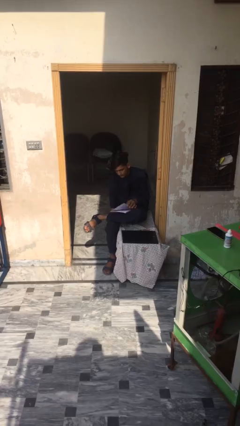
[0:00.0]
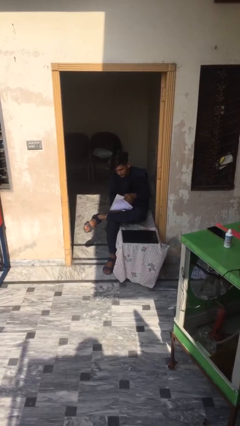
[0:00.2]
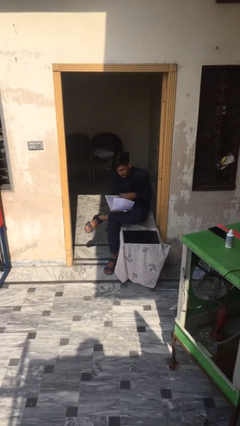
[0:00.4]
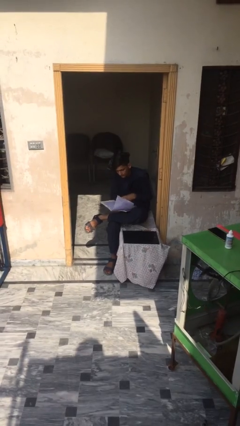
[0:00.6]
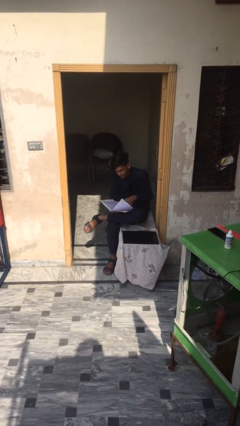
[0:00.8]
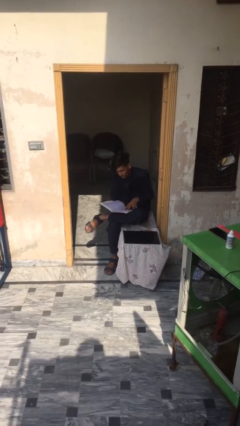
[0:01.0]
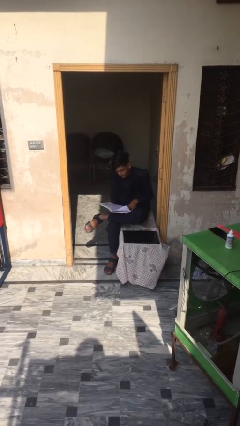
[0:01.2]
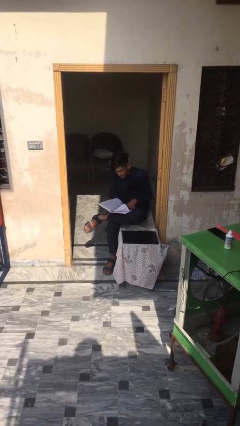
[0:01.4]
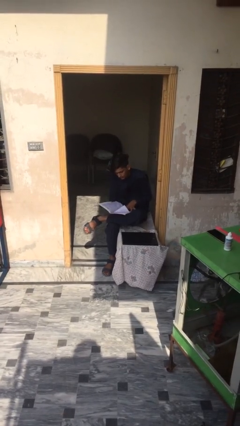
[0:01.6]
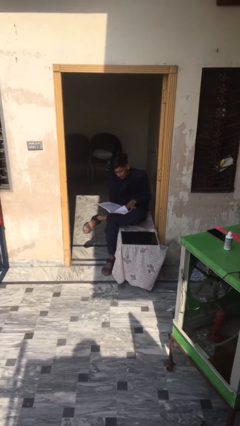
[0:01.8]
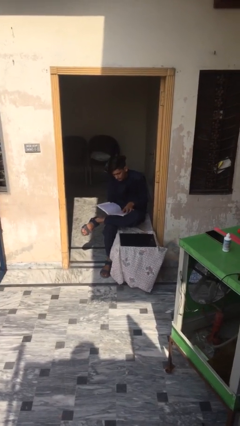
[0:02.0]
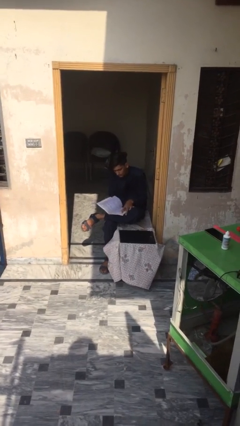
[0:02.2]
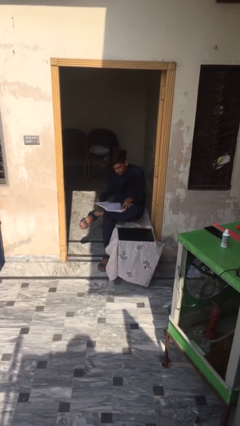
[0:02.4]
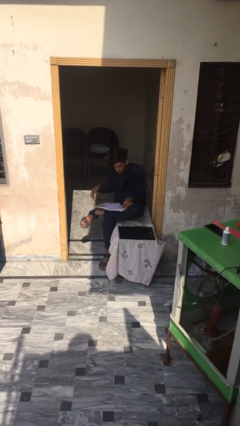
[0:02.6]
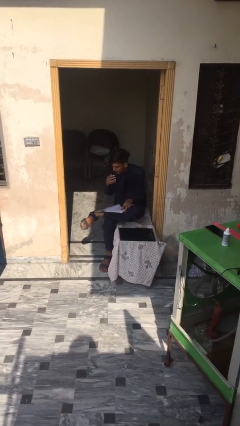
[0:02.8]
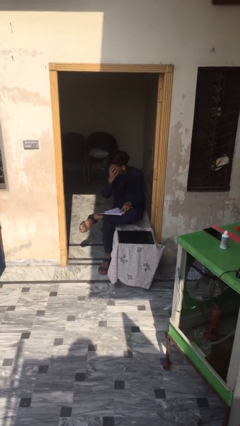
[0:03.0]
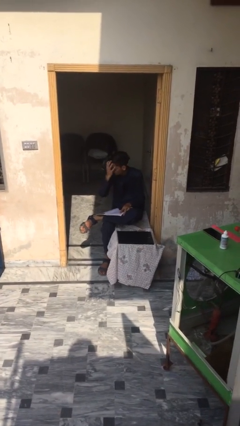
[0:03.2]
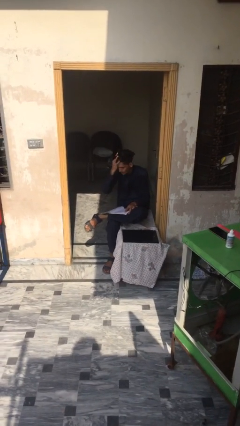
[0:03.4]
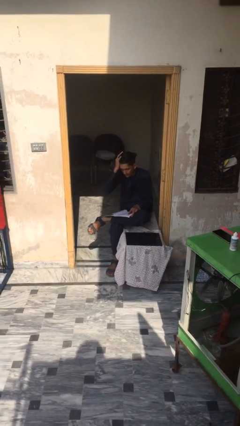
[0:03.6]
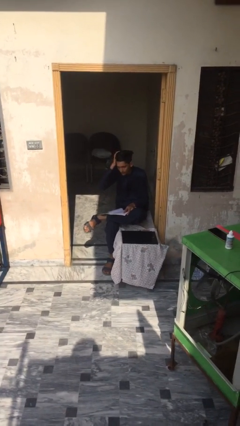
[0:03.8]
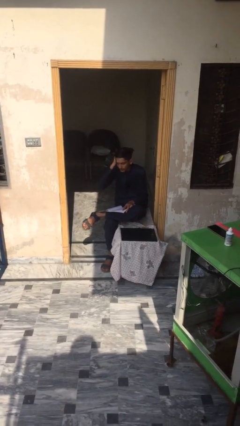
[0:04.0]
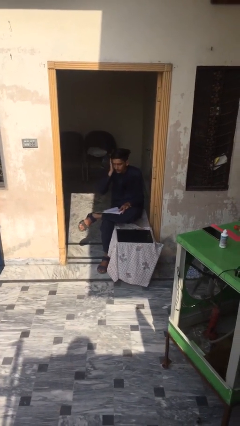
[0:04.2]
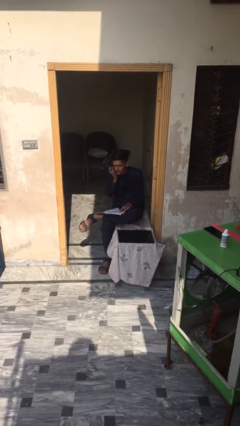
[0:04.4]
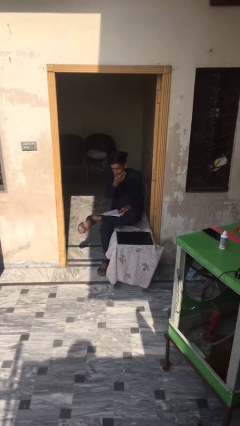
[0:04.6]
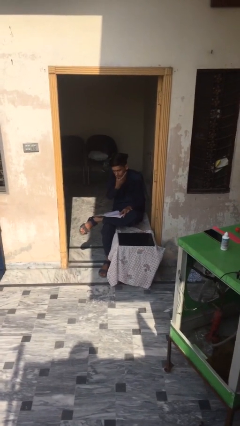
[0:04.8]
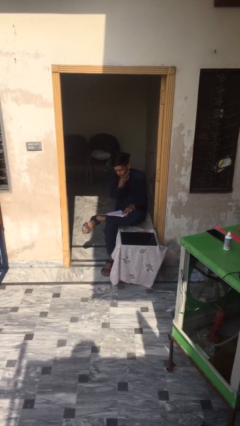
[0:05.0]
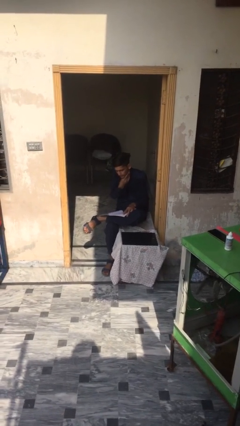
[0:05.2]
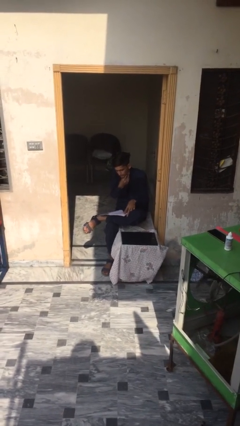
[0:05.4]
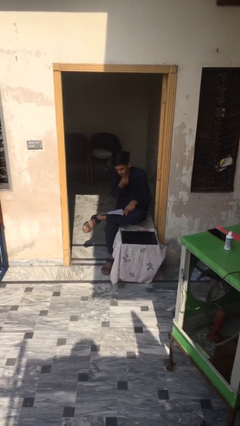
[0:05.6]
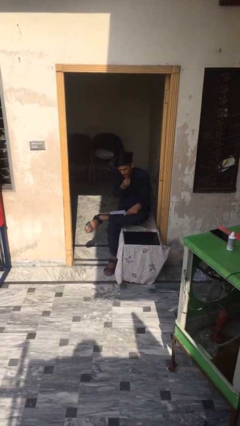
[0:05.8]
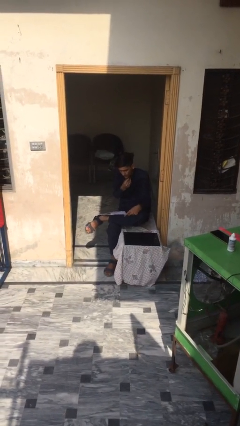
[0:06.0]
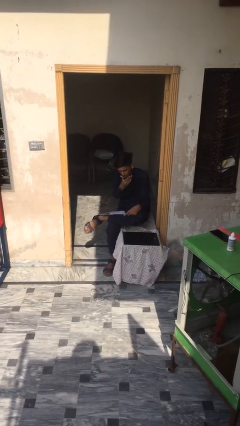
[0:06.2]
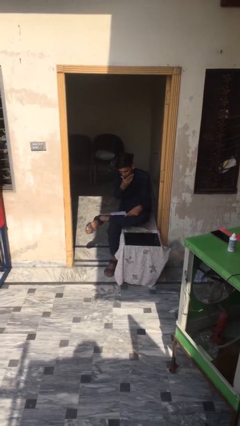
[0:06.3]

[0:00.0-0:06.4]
person reads document

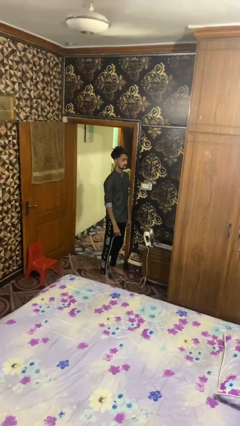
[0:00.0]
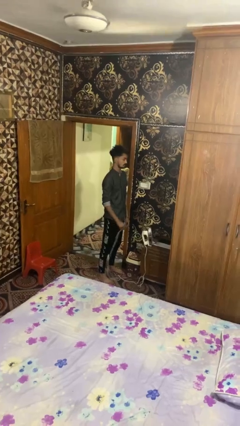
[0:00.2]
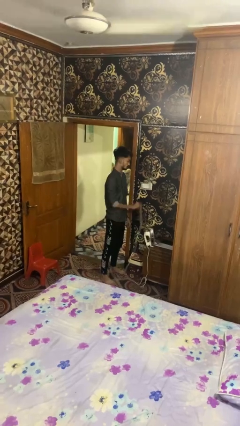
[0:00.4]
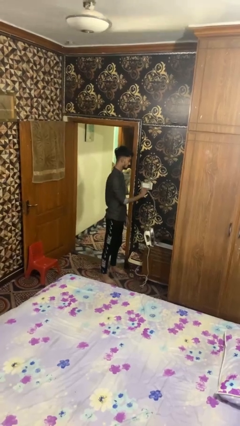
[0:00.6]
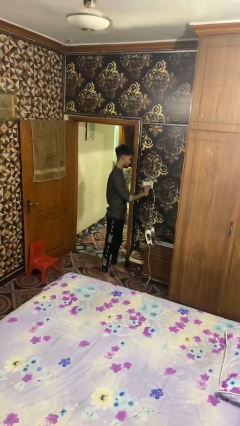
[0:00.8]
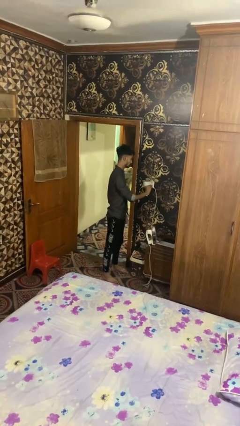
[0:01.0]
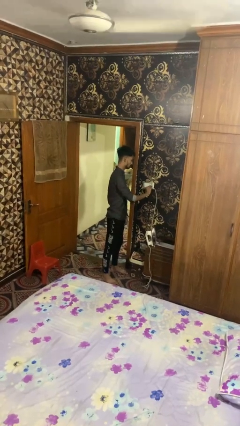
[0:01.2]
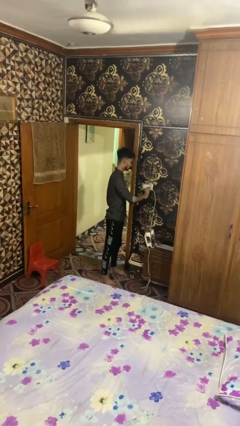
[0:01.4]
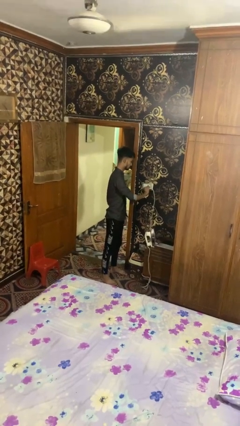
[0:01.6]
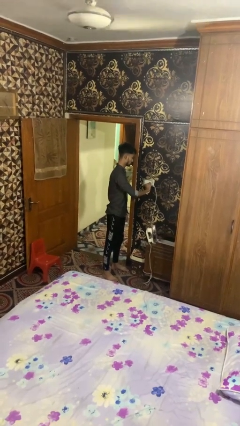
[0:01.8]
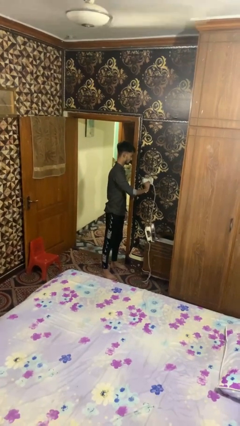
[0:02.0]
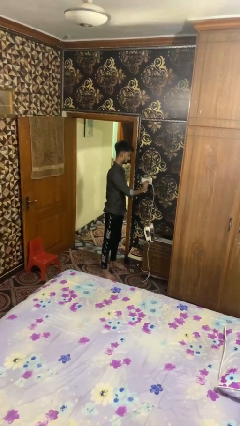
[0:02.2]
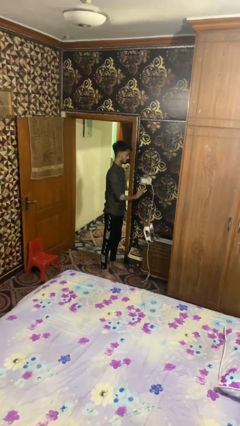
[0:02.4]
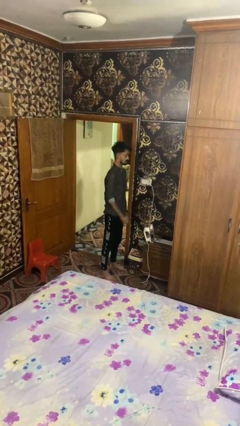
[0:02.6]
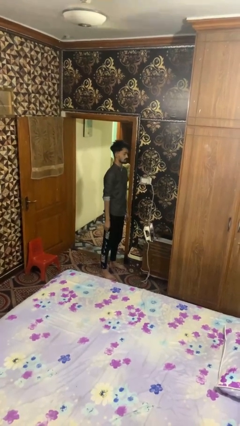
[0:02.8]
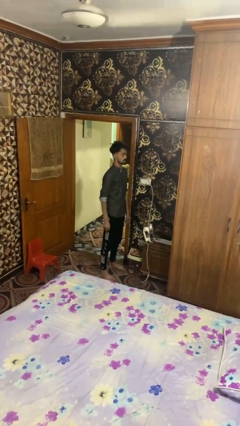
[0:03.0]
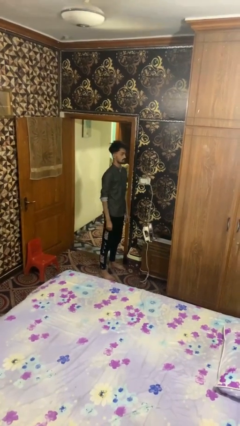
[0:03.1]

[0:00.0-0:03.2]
person plugs into electrical socket

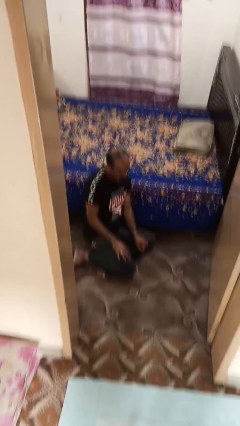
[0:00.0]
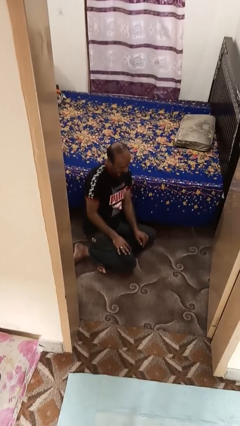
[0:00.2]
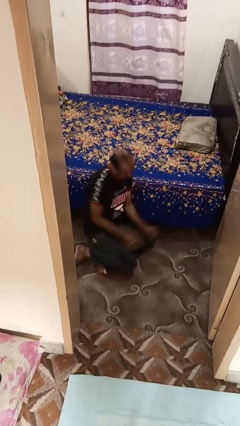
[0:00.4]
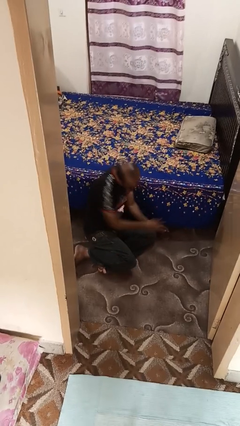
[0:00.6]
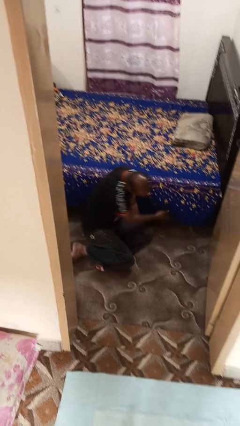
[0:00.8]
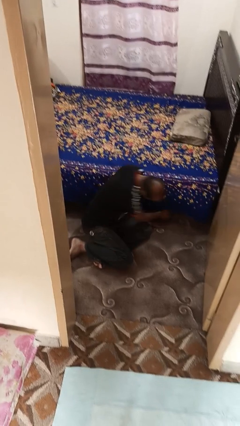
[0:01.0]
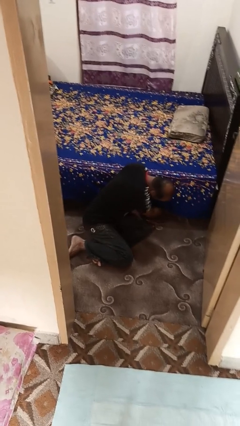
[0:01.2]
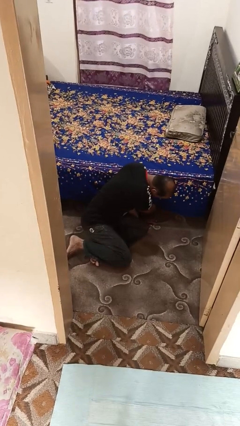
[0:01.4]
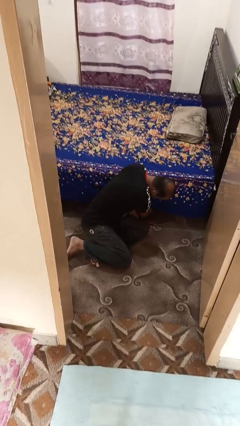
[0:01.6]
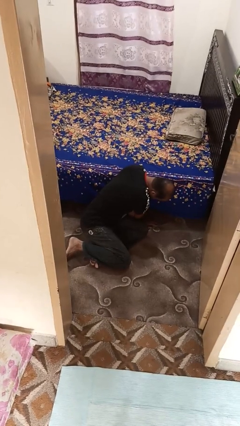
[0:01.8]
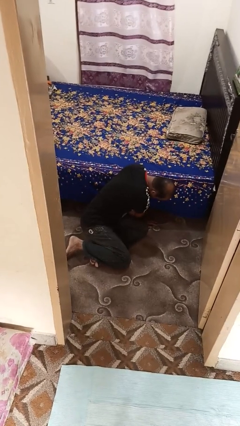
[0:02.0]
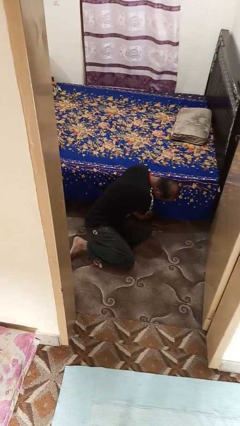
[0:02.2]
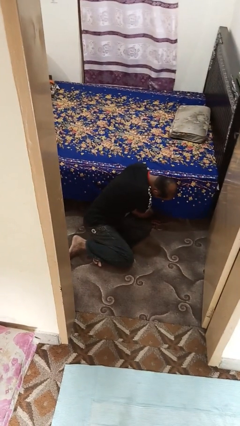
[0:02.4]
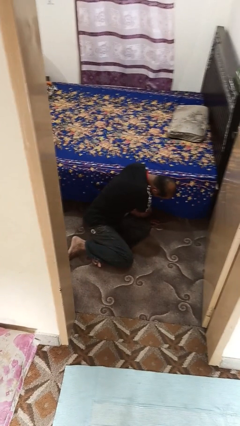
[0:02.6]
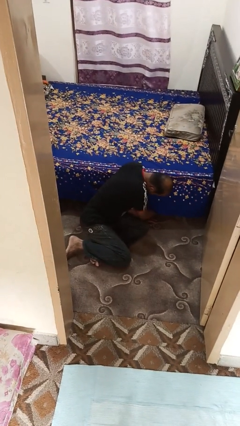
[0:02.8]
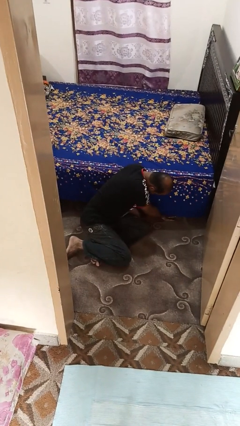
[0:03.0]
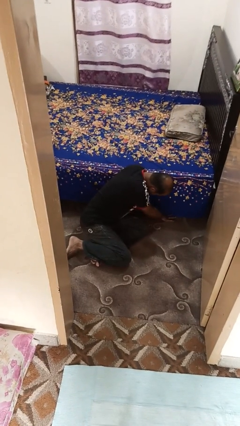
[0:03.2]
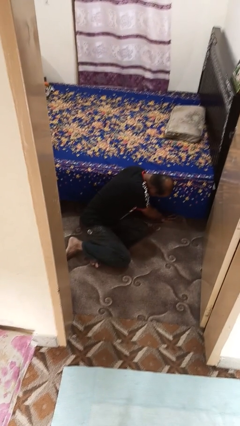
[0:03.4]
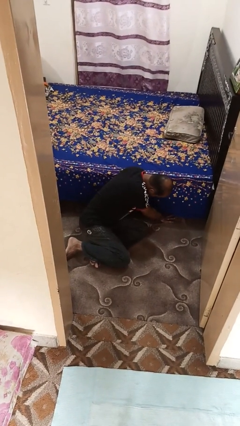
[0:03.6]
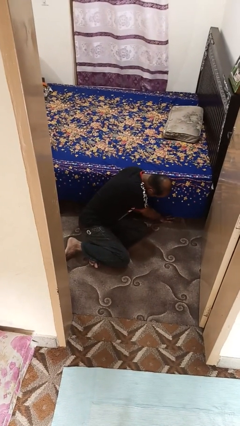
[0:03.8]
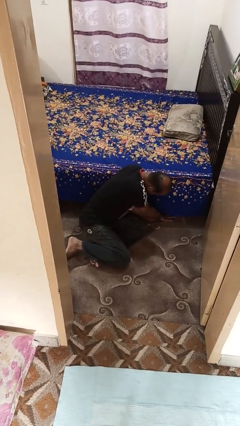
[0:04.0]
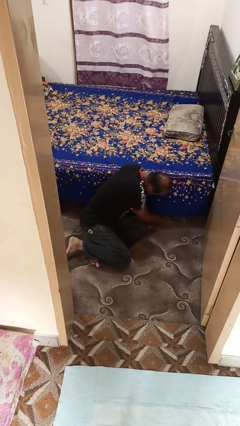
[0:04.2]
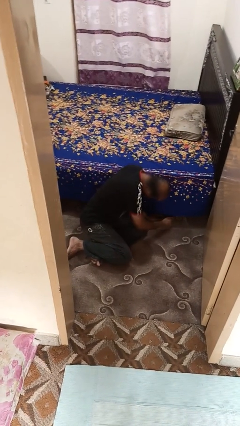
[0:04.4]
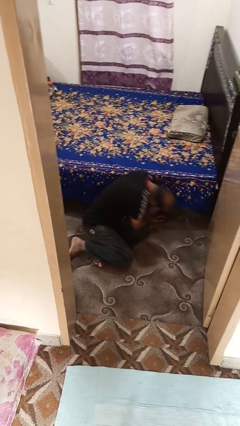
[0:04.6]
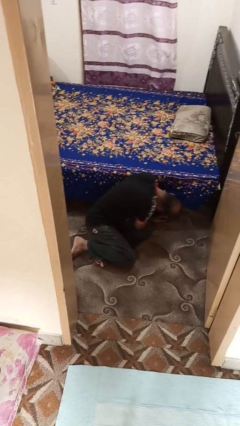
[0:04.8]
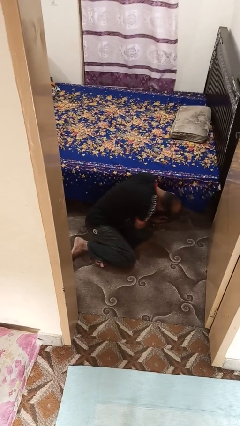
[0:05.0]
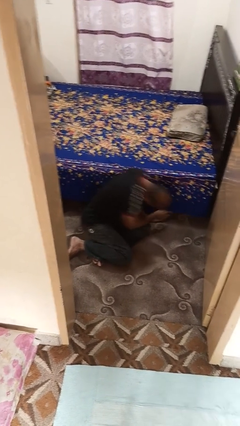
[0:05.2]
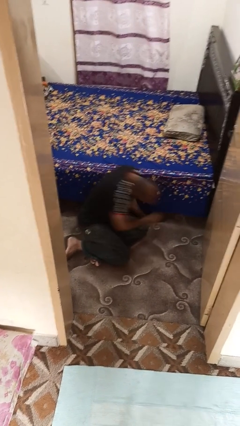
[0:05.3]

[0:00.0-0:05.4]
person searches under bed

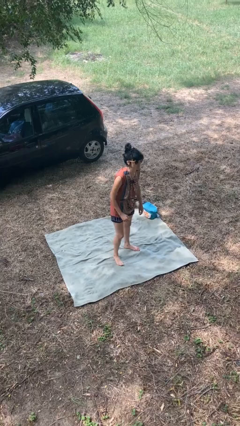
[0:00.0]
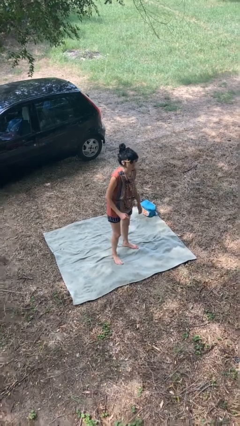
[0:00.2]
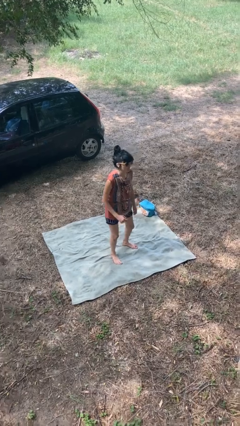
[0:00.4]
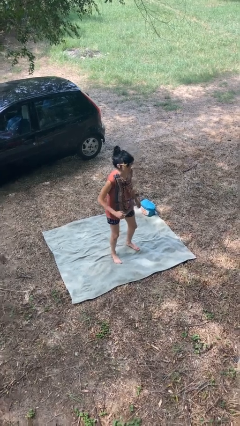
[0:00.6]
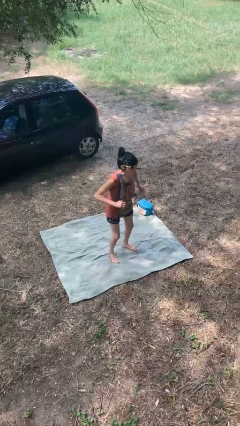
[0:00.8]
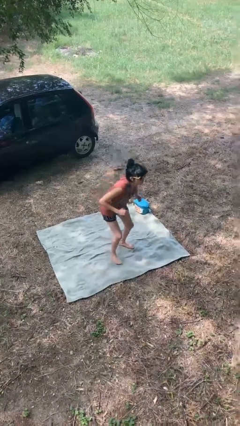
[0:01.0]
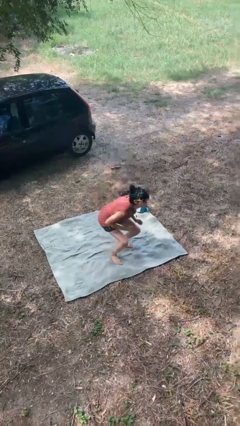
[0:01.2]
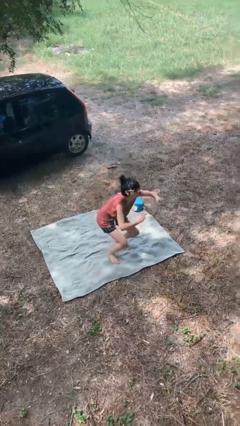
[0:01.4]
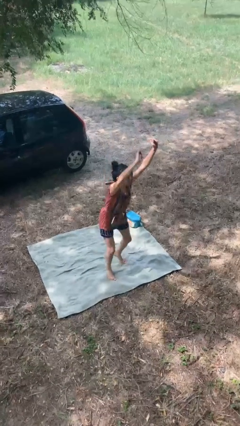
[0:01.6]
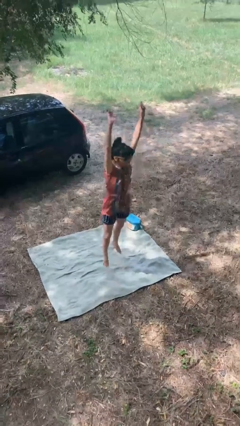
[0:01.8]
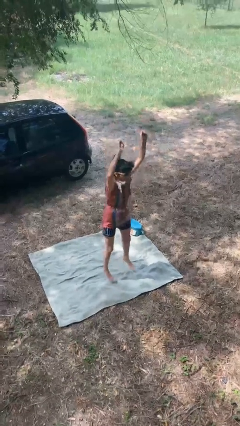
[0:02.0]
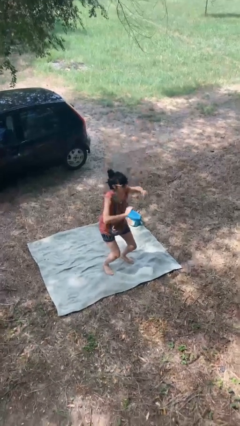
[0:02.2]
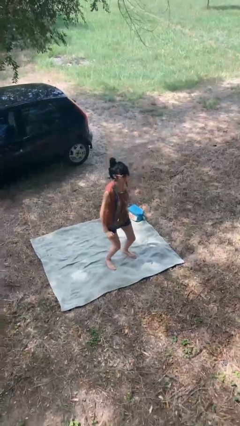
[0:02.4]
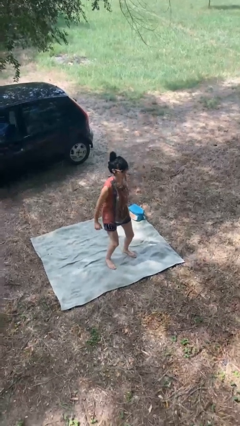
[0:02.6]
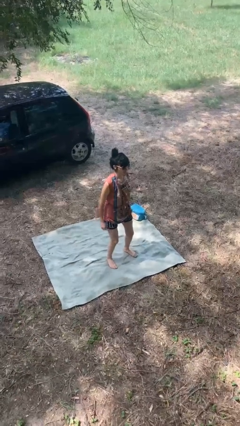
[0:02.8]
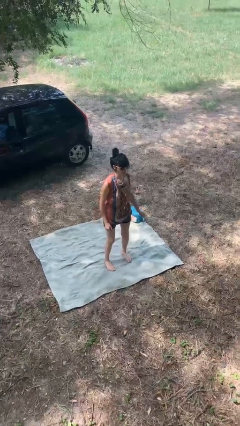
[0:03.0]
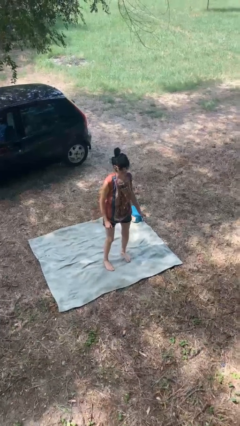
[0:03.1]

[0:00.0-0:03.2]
person jumps
